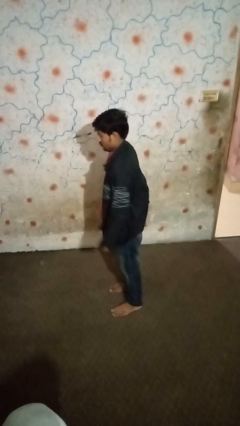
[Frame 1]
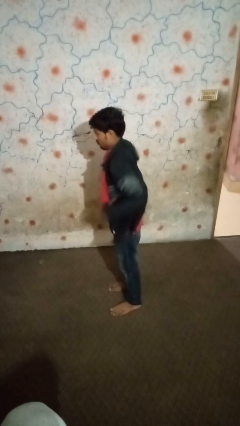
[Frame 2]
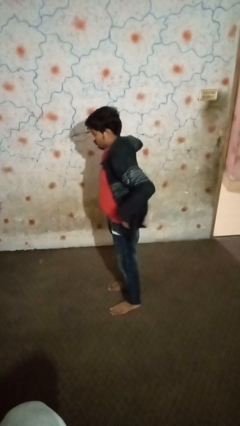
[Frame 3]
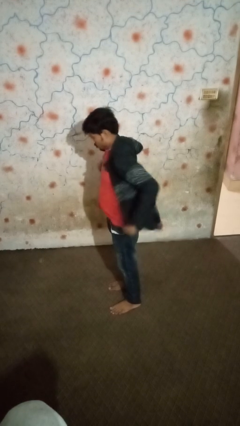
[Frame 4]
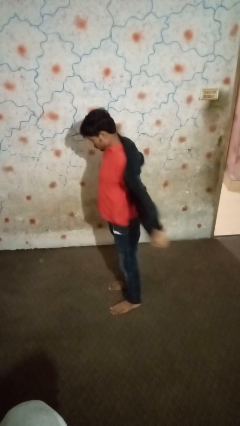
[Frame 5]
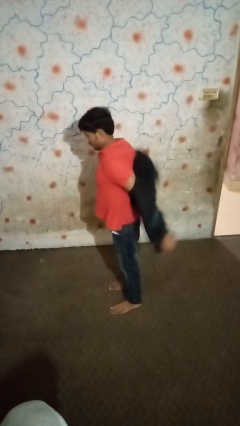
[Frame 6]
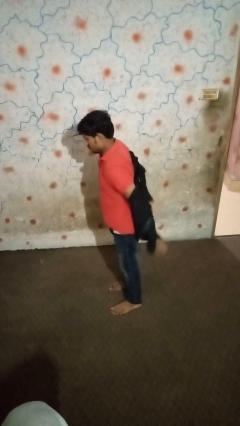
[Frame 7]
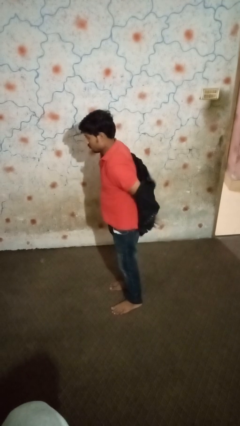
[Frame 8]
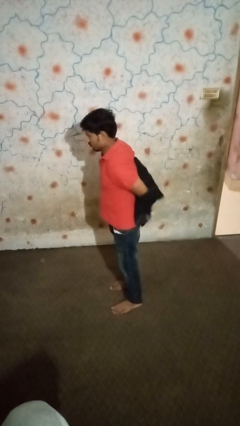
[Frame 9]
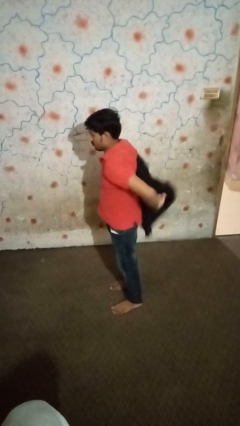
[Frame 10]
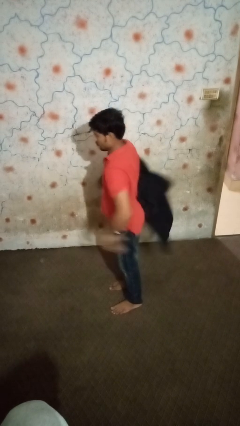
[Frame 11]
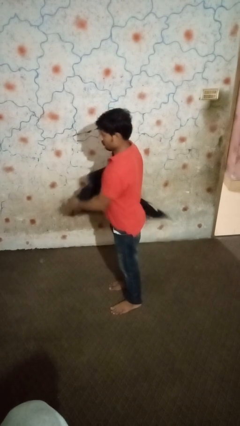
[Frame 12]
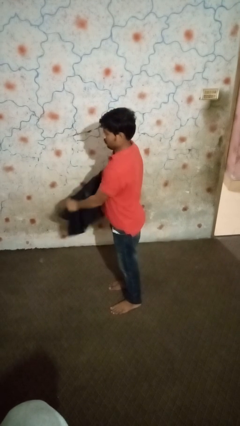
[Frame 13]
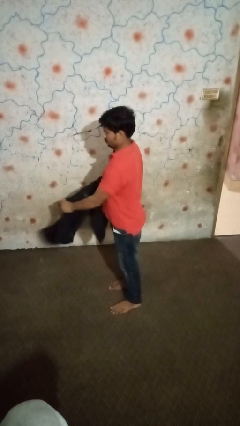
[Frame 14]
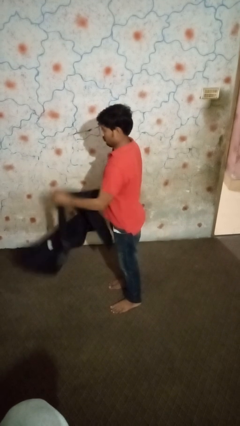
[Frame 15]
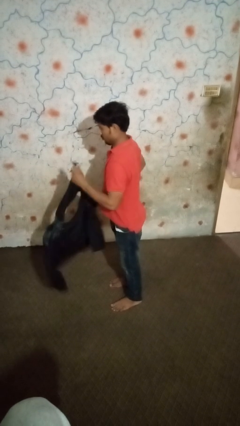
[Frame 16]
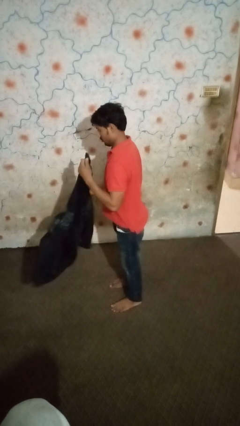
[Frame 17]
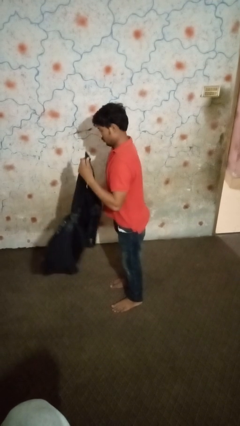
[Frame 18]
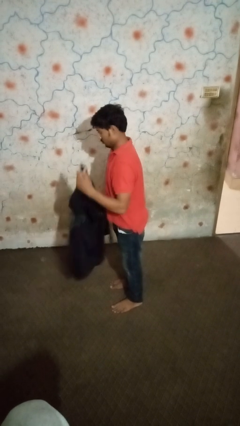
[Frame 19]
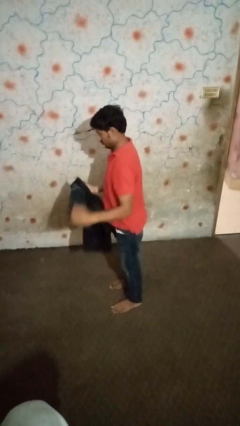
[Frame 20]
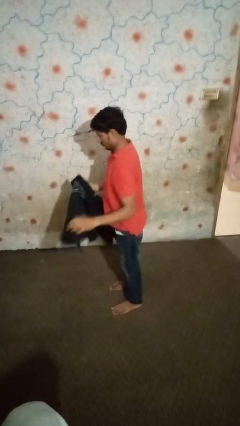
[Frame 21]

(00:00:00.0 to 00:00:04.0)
person takes off shirt

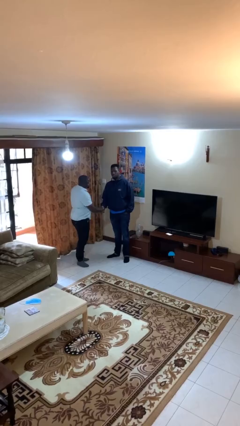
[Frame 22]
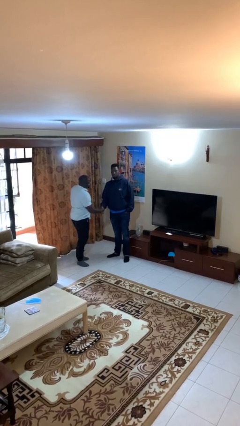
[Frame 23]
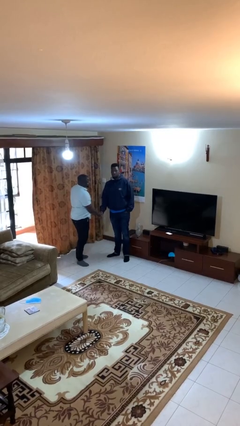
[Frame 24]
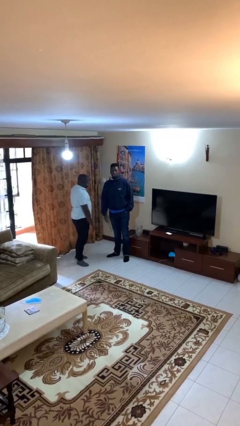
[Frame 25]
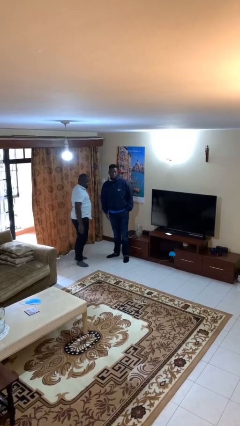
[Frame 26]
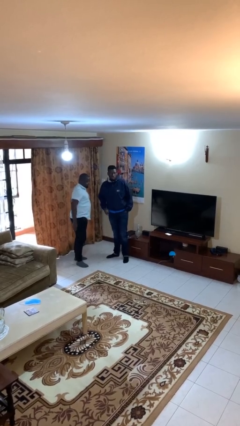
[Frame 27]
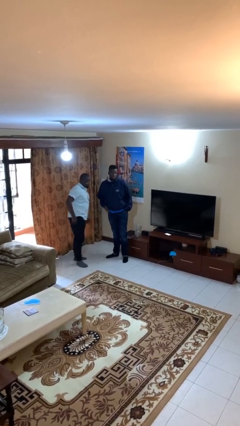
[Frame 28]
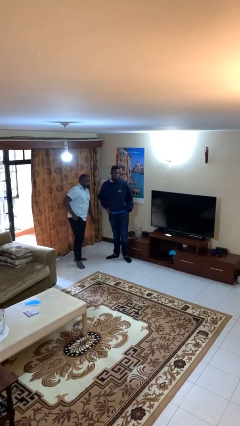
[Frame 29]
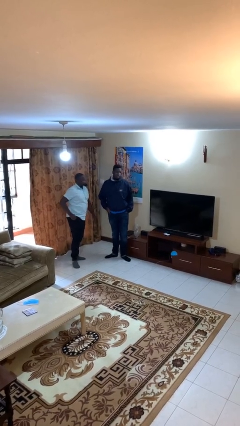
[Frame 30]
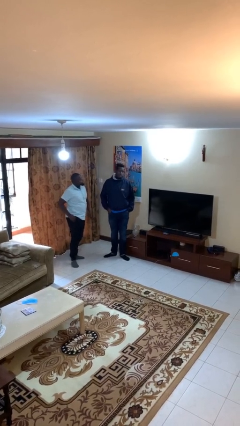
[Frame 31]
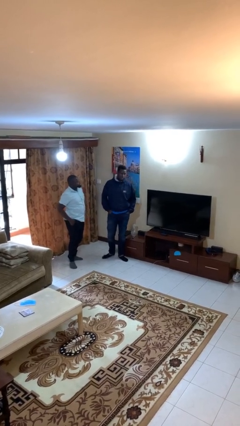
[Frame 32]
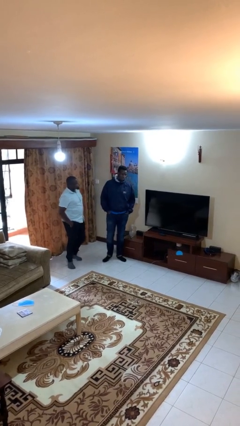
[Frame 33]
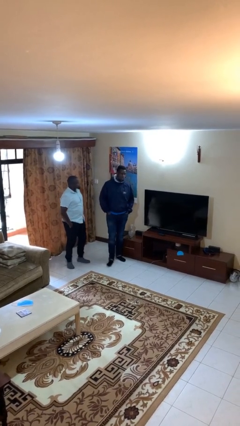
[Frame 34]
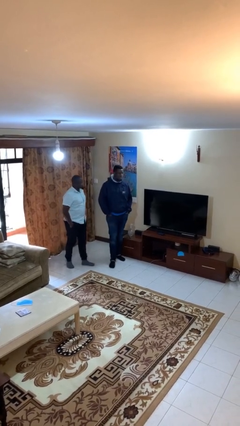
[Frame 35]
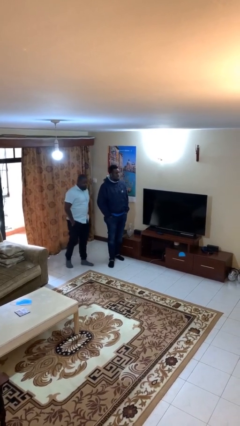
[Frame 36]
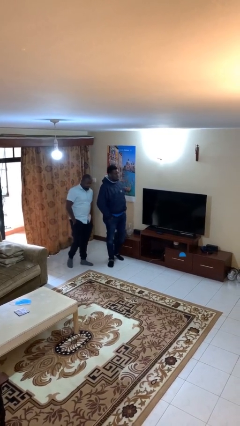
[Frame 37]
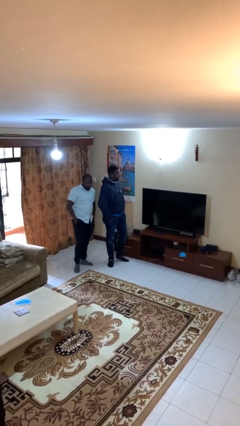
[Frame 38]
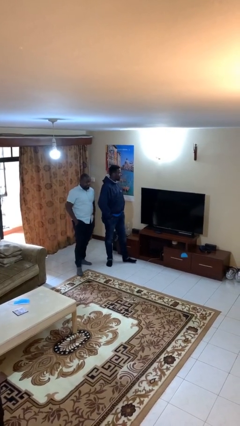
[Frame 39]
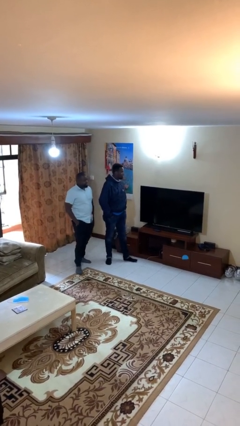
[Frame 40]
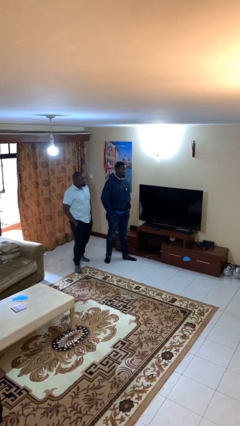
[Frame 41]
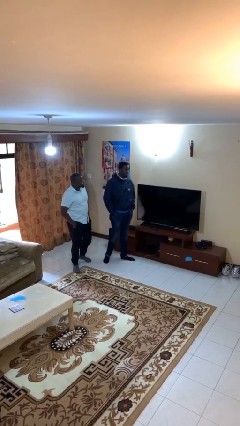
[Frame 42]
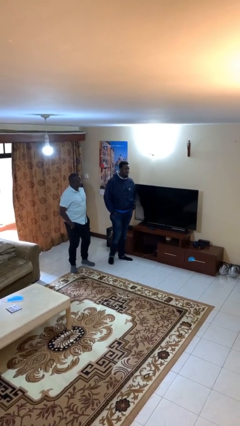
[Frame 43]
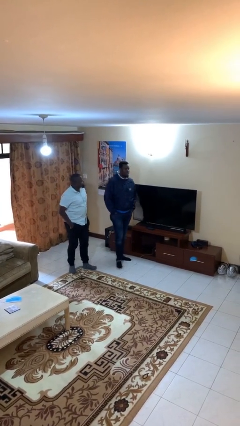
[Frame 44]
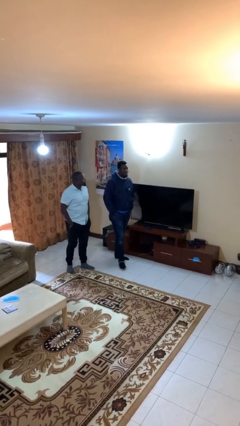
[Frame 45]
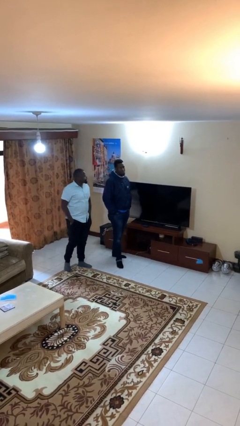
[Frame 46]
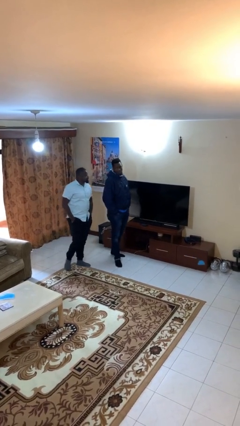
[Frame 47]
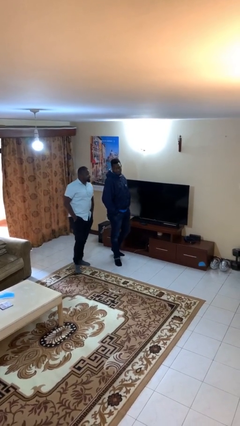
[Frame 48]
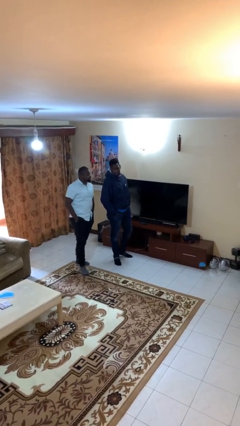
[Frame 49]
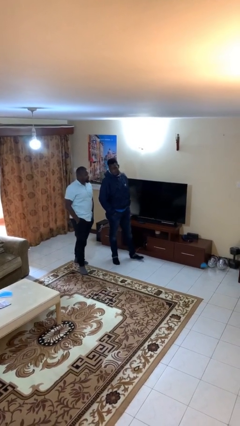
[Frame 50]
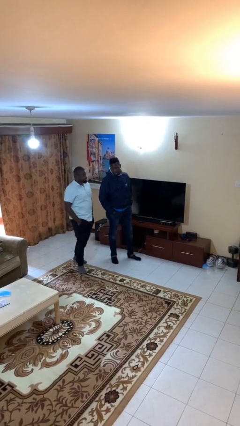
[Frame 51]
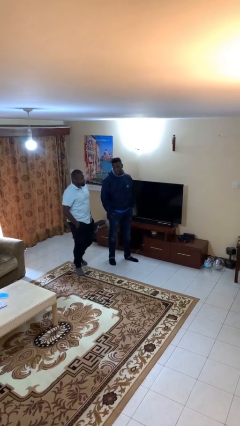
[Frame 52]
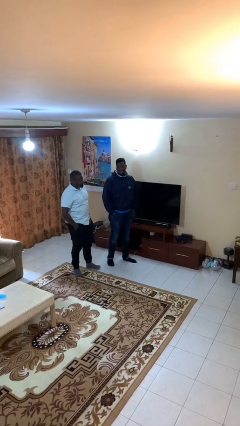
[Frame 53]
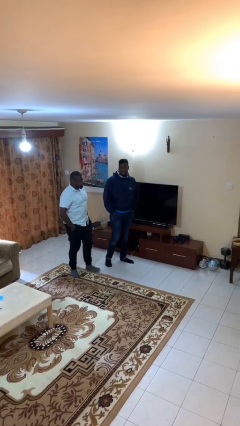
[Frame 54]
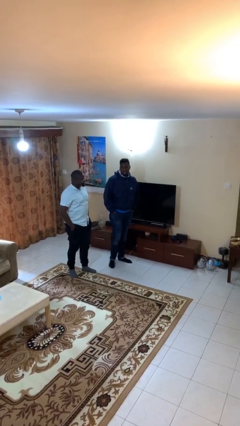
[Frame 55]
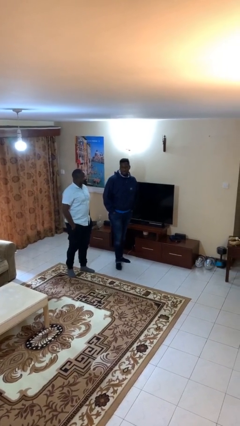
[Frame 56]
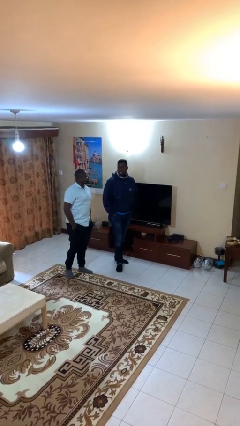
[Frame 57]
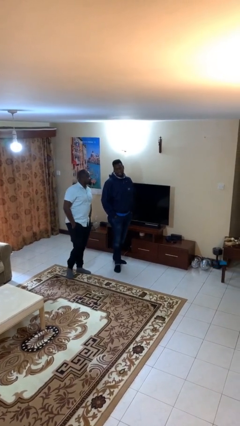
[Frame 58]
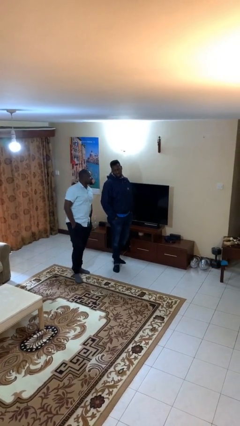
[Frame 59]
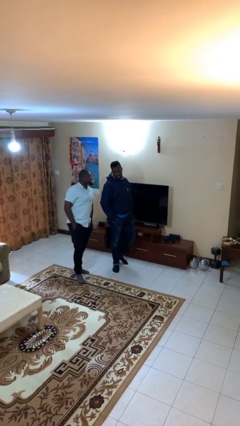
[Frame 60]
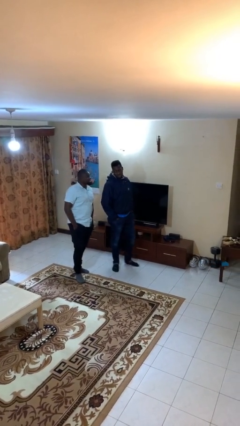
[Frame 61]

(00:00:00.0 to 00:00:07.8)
person talks to person

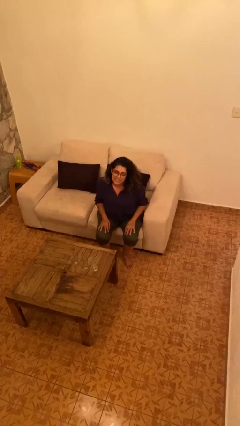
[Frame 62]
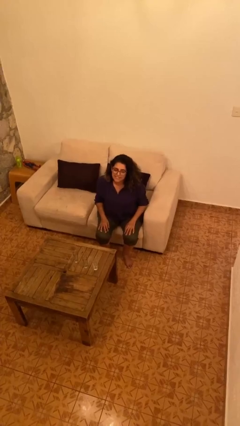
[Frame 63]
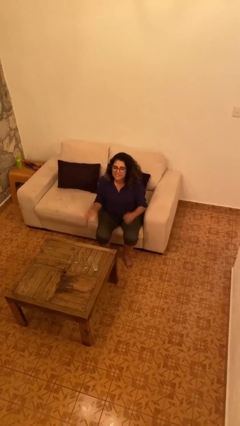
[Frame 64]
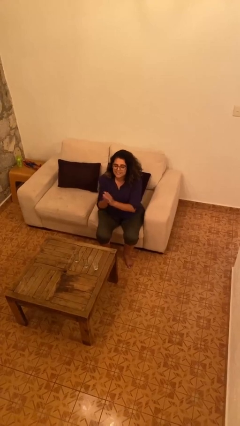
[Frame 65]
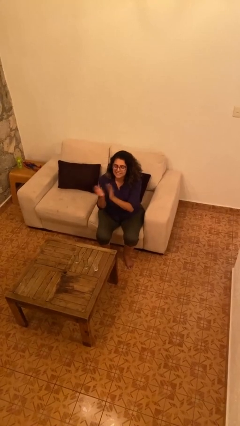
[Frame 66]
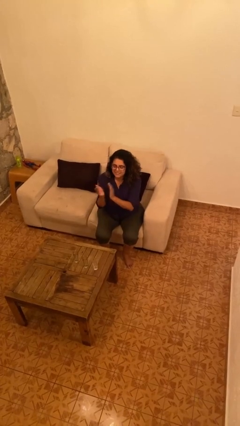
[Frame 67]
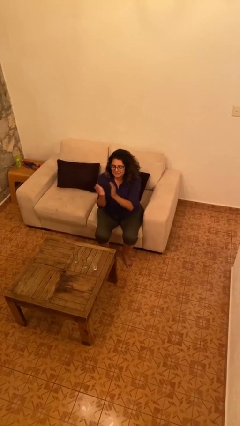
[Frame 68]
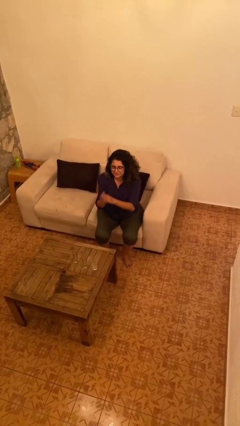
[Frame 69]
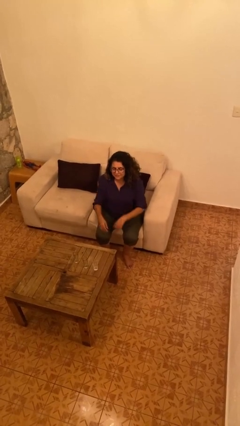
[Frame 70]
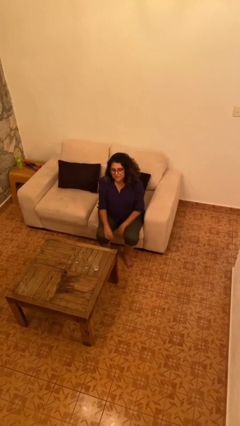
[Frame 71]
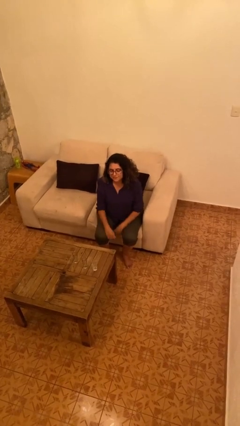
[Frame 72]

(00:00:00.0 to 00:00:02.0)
person claps hands

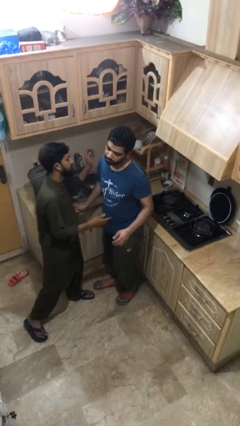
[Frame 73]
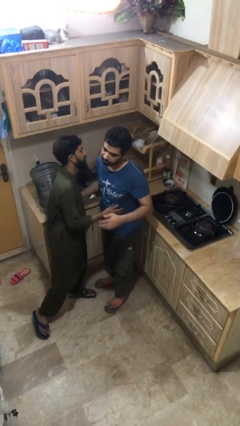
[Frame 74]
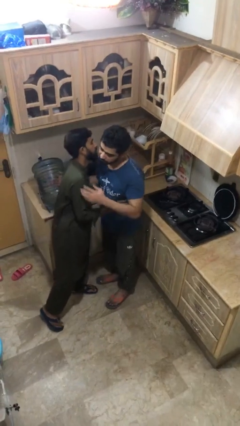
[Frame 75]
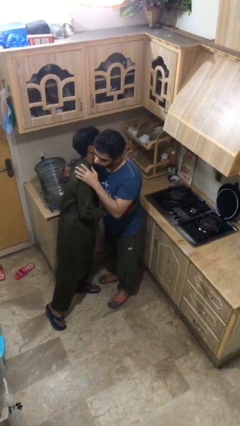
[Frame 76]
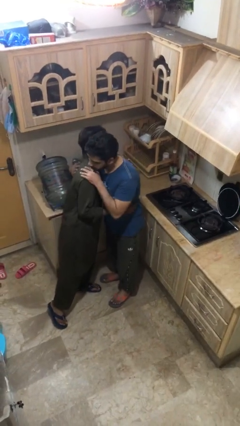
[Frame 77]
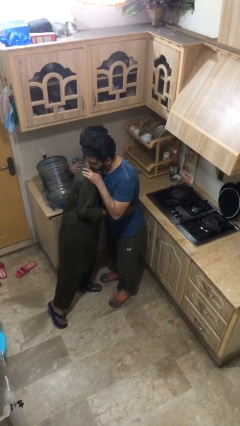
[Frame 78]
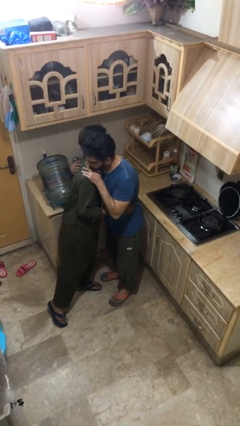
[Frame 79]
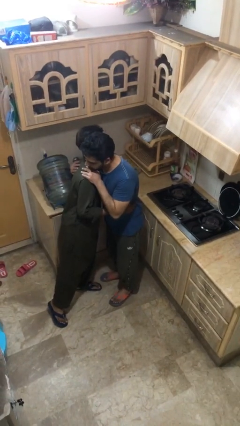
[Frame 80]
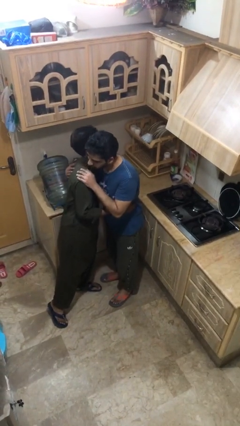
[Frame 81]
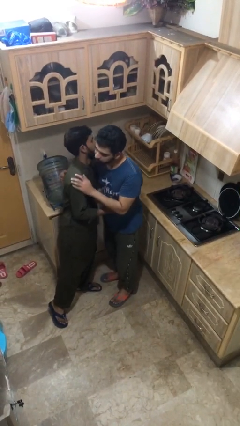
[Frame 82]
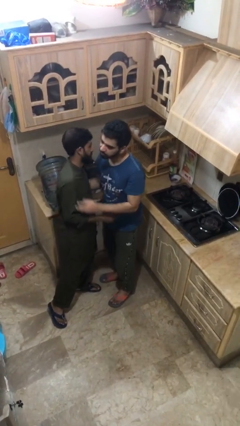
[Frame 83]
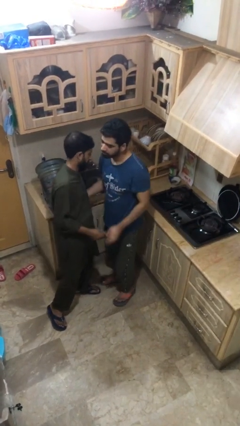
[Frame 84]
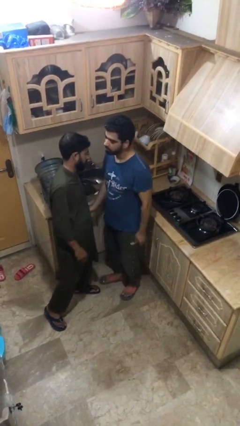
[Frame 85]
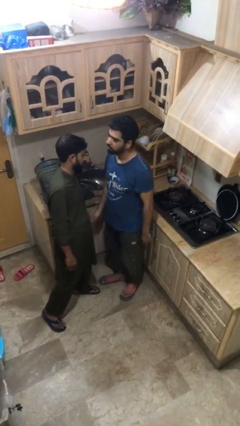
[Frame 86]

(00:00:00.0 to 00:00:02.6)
person embraces person

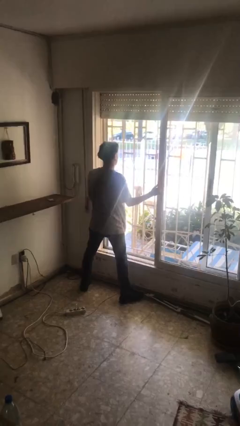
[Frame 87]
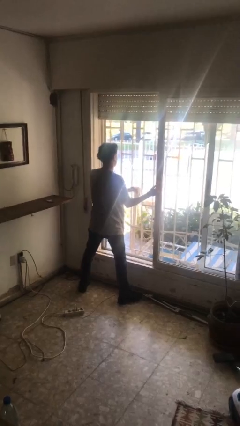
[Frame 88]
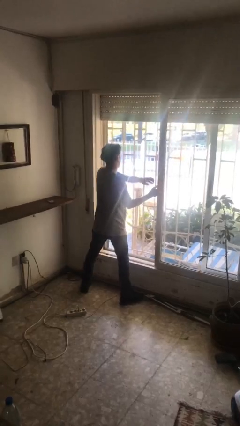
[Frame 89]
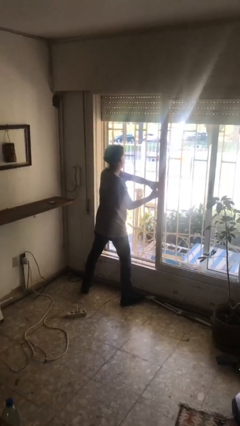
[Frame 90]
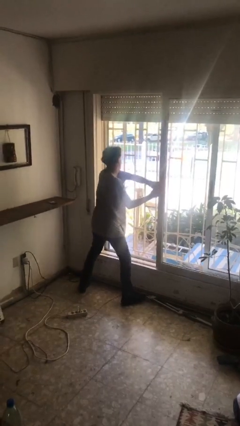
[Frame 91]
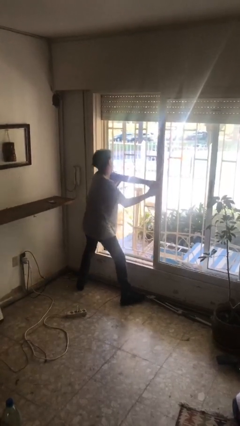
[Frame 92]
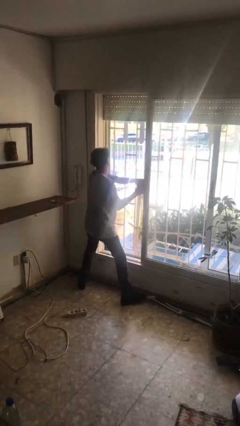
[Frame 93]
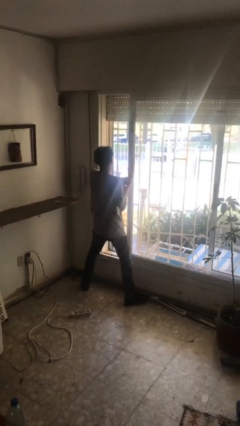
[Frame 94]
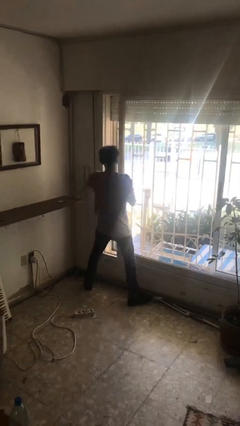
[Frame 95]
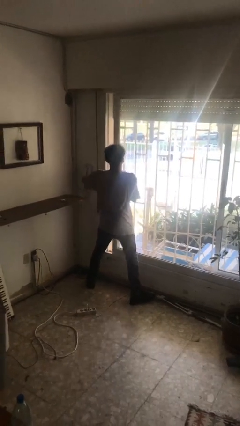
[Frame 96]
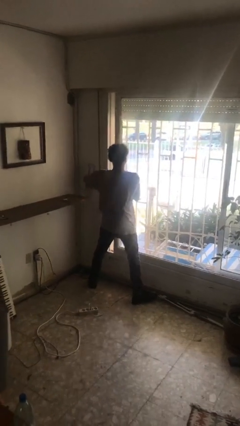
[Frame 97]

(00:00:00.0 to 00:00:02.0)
person closes sliding door
